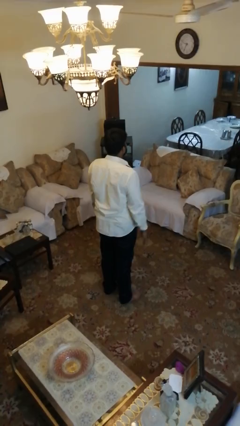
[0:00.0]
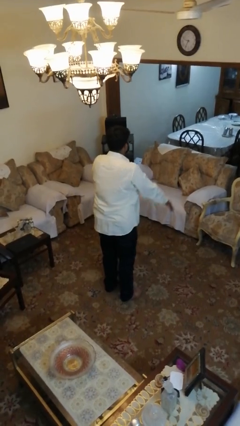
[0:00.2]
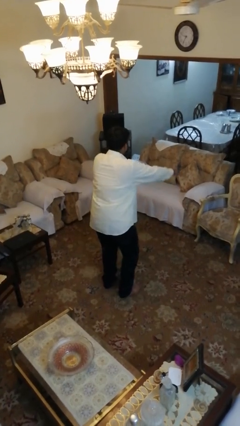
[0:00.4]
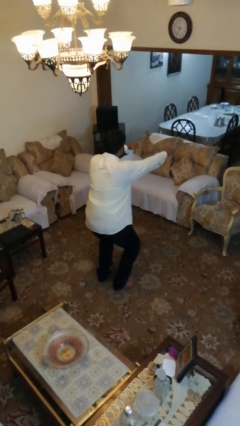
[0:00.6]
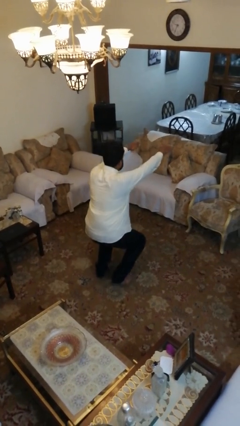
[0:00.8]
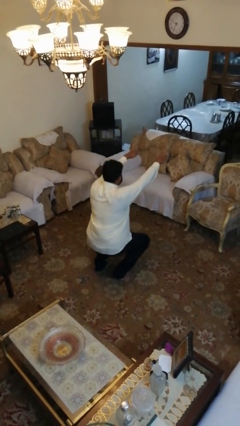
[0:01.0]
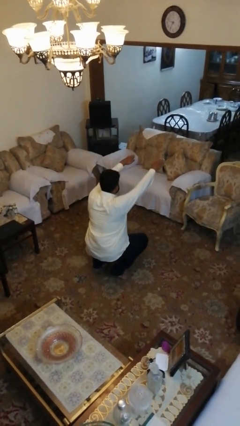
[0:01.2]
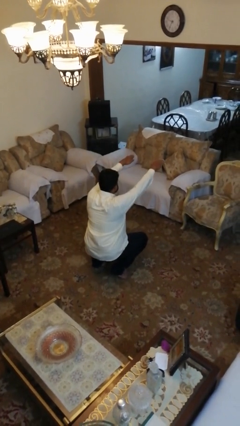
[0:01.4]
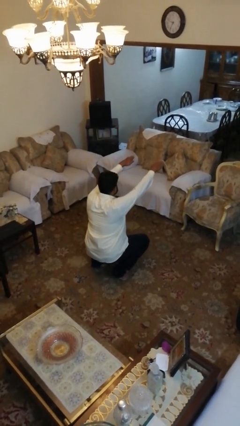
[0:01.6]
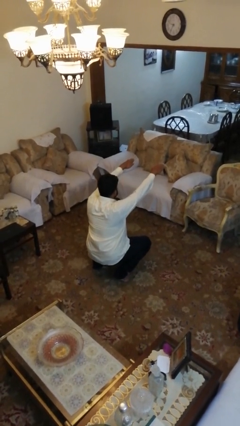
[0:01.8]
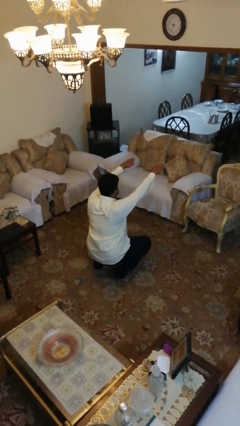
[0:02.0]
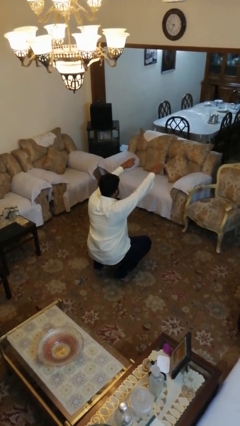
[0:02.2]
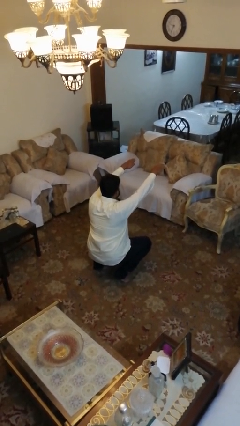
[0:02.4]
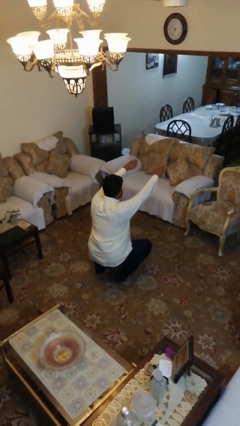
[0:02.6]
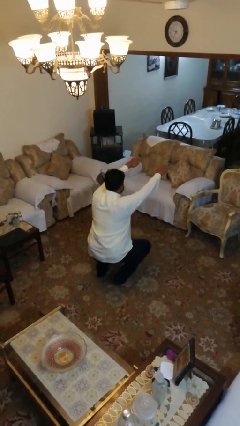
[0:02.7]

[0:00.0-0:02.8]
person squats

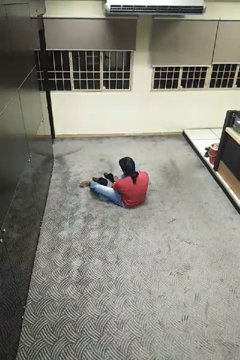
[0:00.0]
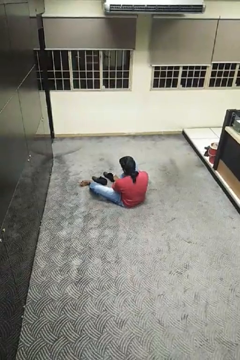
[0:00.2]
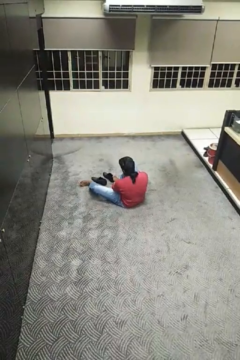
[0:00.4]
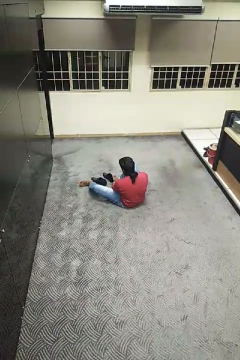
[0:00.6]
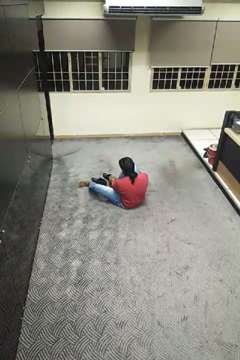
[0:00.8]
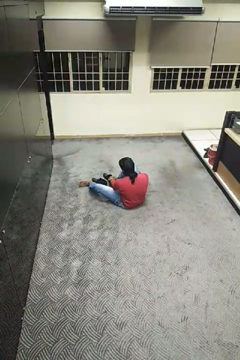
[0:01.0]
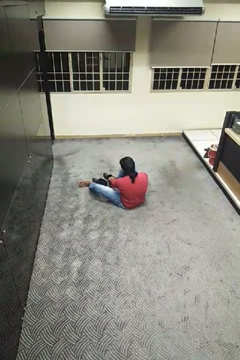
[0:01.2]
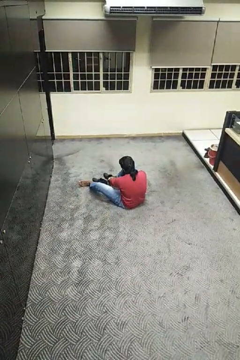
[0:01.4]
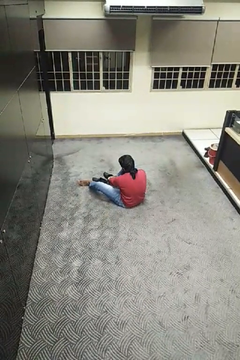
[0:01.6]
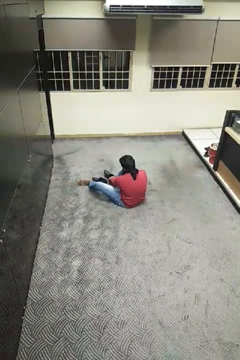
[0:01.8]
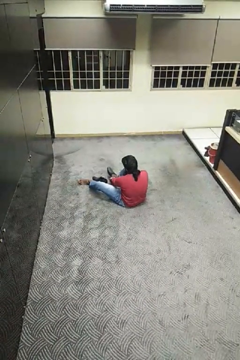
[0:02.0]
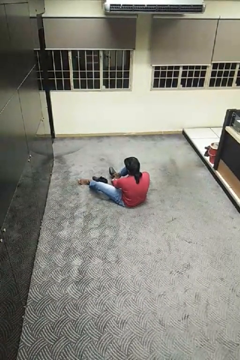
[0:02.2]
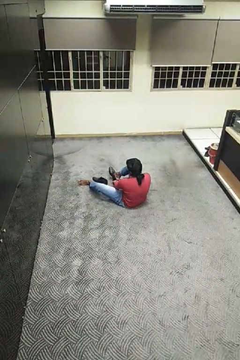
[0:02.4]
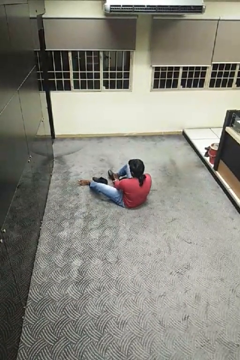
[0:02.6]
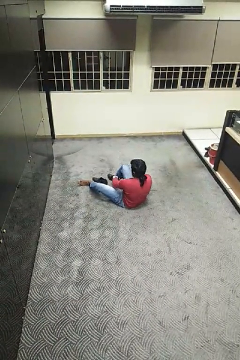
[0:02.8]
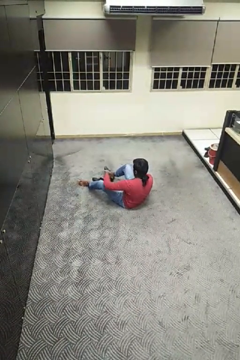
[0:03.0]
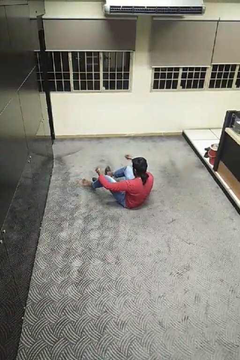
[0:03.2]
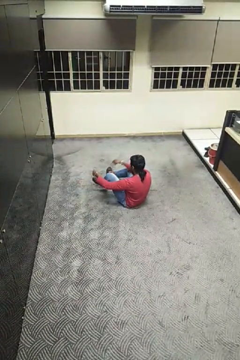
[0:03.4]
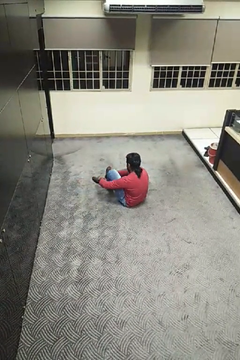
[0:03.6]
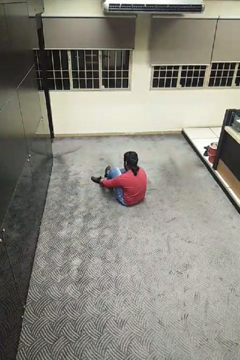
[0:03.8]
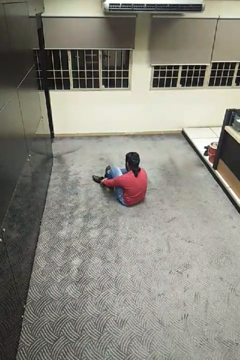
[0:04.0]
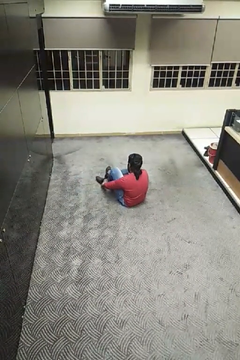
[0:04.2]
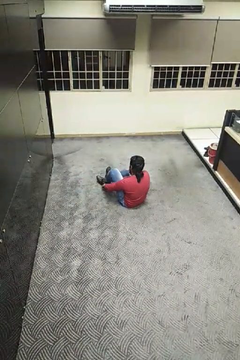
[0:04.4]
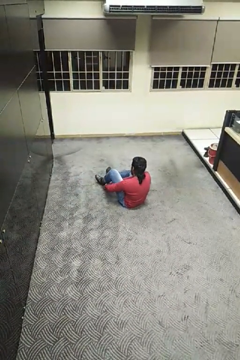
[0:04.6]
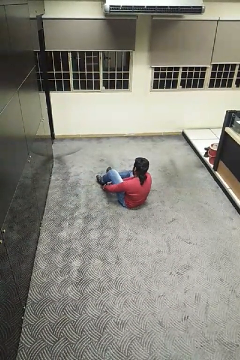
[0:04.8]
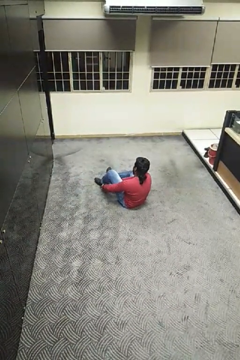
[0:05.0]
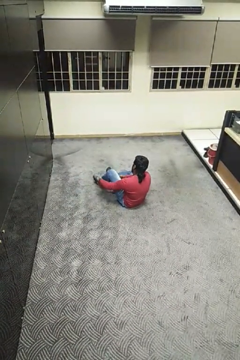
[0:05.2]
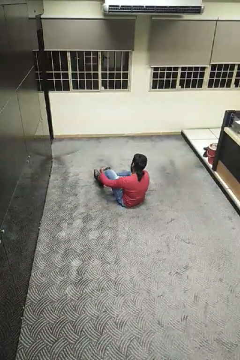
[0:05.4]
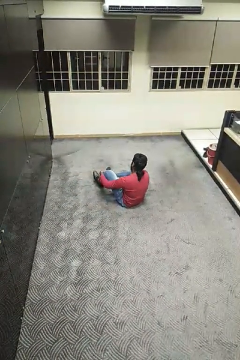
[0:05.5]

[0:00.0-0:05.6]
person puts on shoes

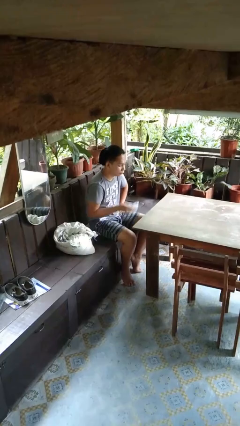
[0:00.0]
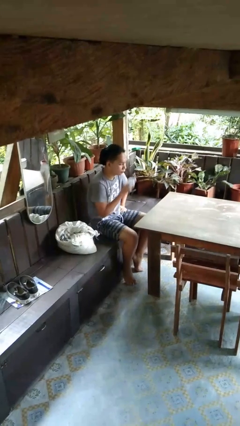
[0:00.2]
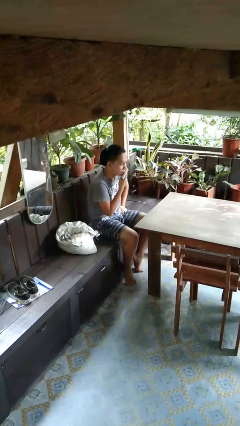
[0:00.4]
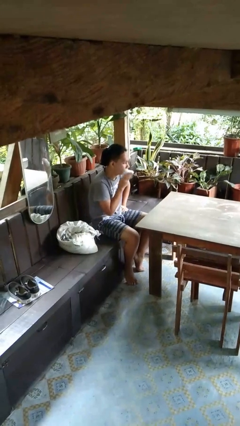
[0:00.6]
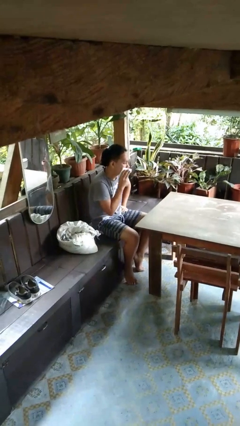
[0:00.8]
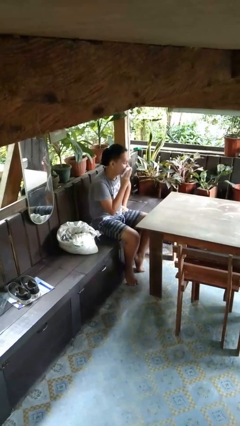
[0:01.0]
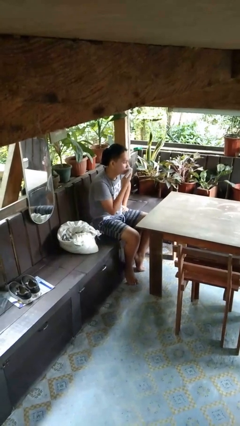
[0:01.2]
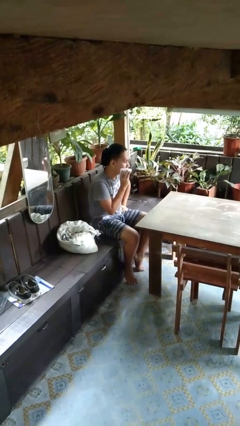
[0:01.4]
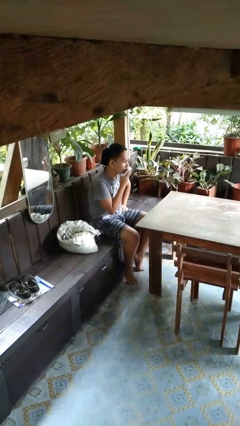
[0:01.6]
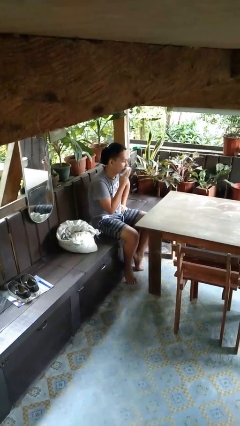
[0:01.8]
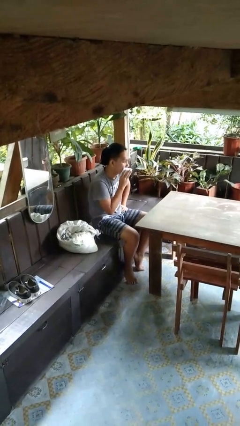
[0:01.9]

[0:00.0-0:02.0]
person wipes mouth with napkin

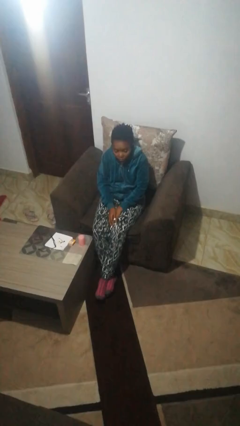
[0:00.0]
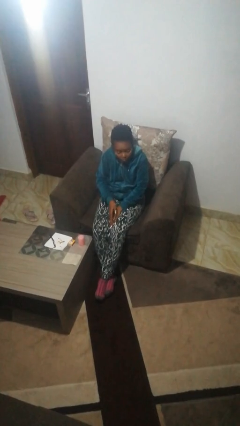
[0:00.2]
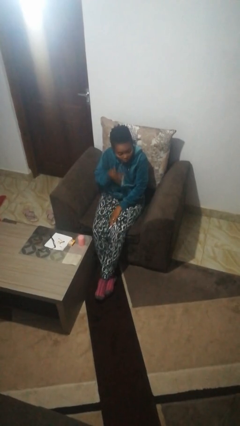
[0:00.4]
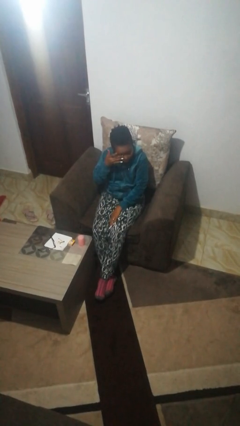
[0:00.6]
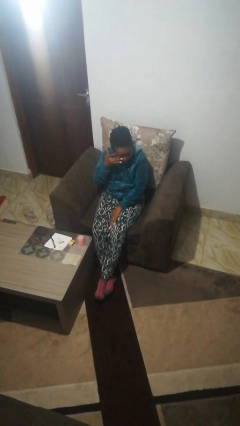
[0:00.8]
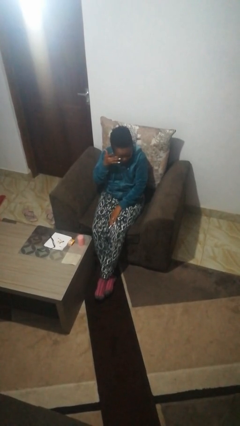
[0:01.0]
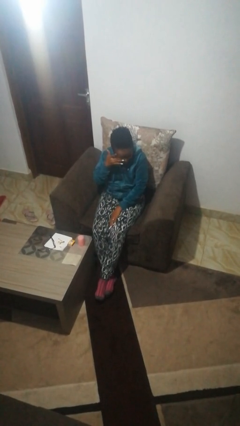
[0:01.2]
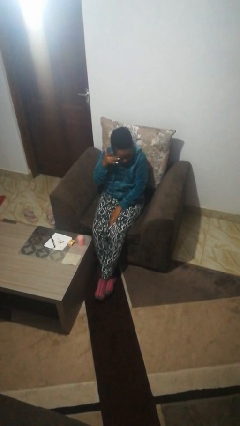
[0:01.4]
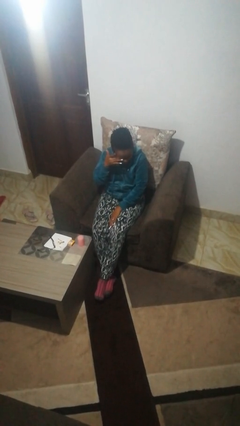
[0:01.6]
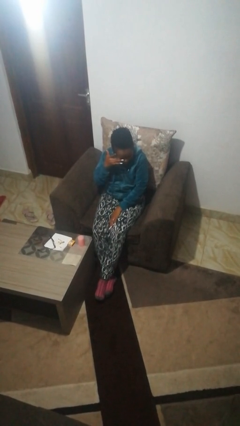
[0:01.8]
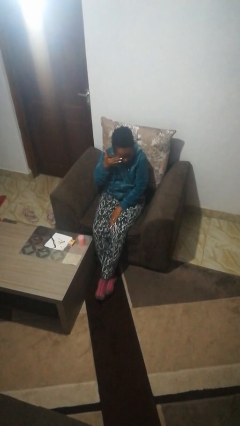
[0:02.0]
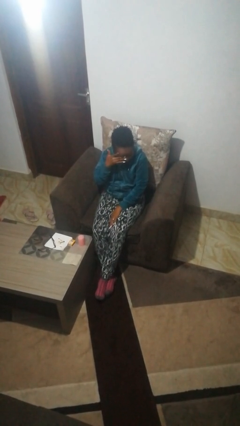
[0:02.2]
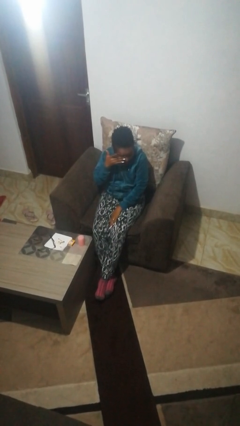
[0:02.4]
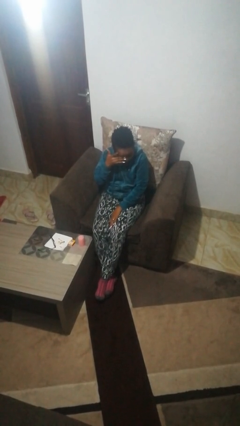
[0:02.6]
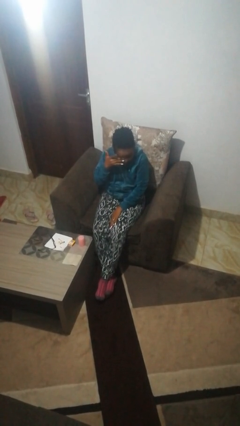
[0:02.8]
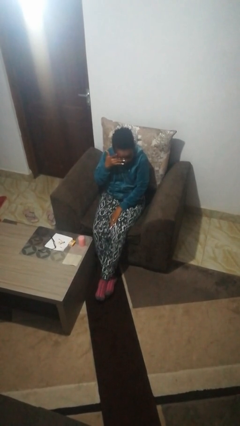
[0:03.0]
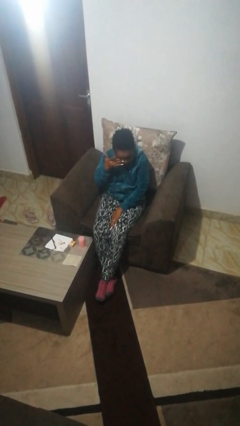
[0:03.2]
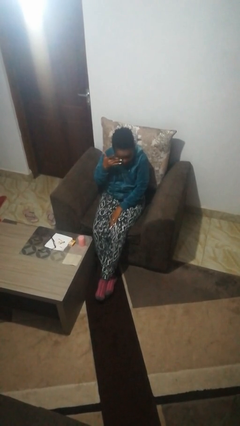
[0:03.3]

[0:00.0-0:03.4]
person rubs eyes

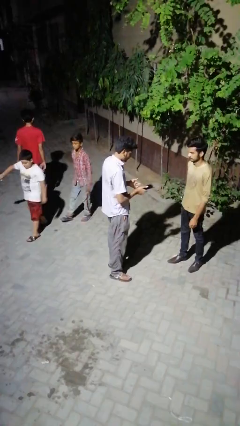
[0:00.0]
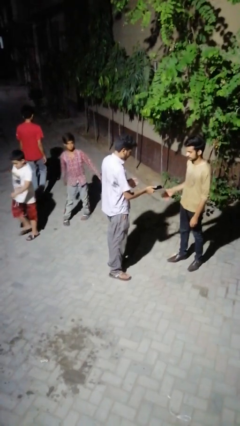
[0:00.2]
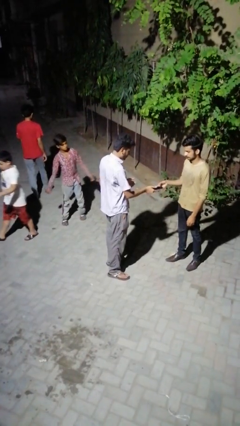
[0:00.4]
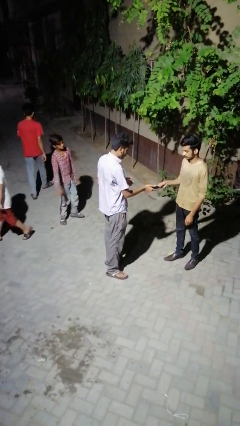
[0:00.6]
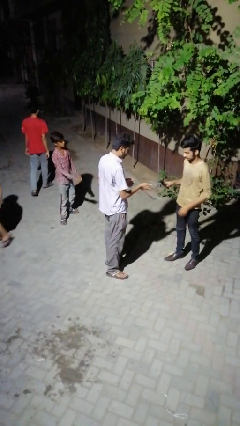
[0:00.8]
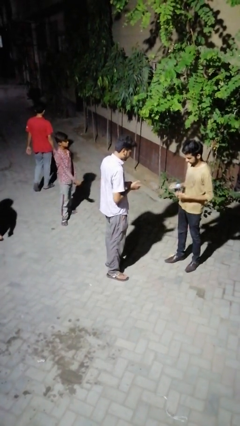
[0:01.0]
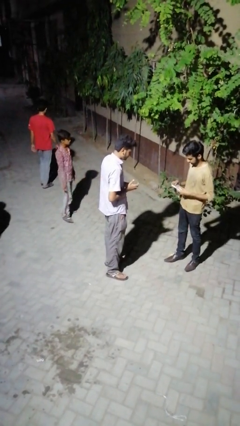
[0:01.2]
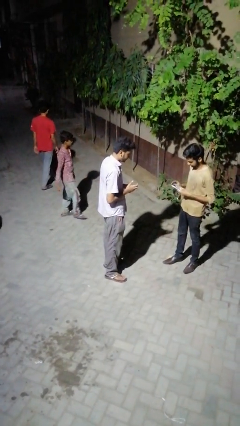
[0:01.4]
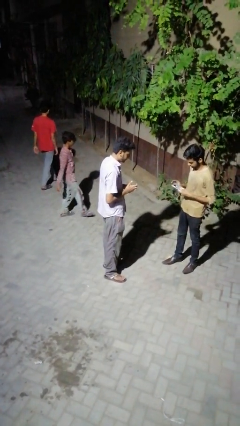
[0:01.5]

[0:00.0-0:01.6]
person transfers object to person

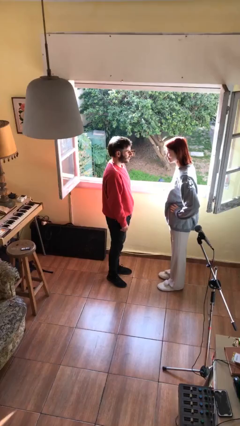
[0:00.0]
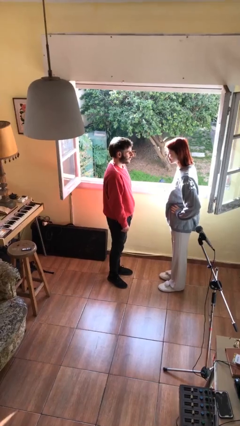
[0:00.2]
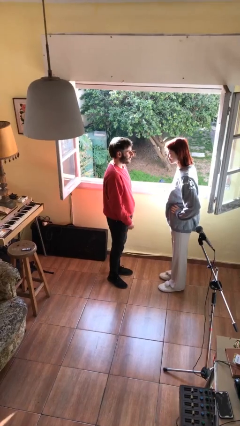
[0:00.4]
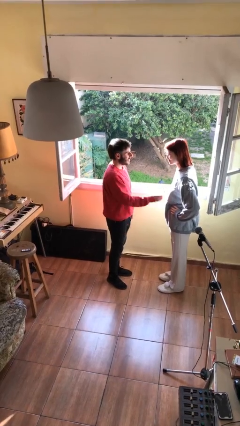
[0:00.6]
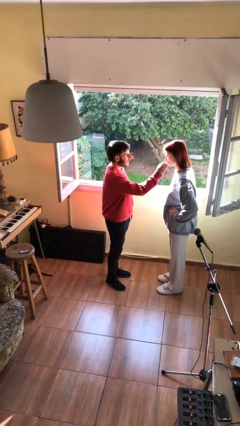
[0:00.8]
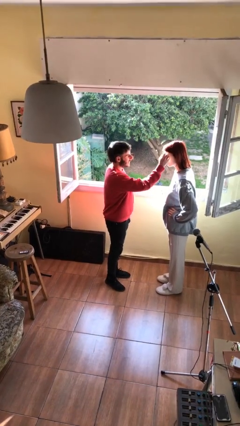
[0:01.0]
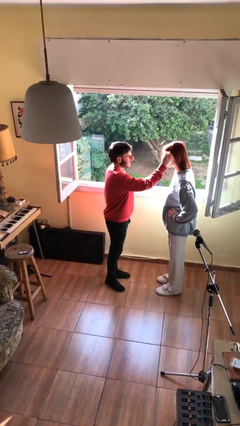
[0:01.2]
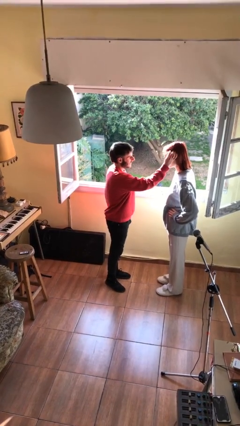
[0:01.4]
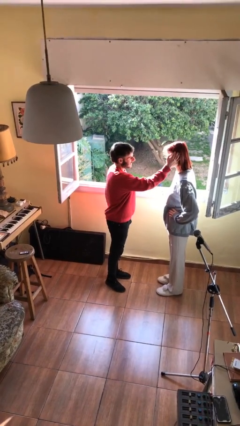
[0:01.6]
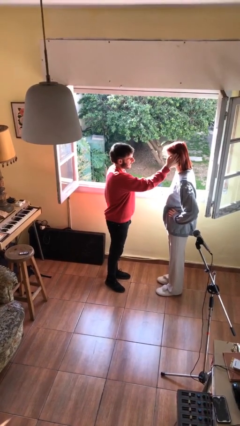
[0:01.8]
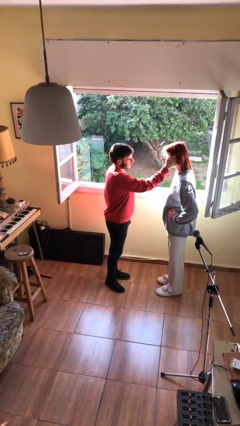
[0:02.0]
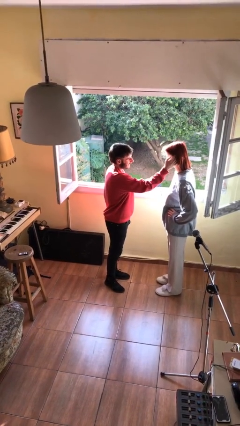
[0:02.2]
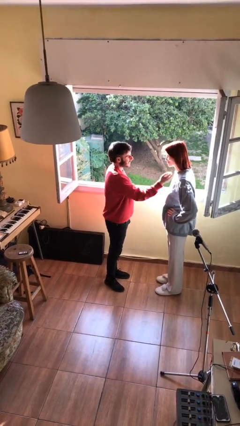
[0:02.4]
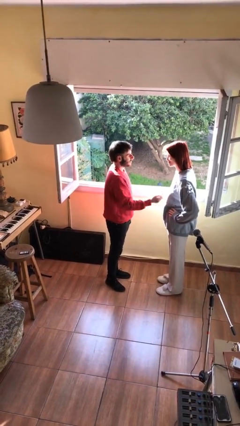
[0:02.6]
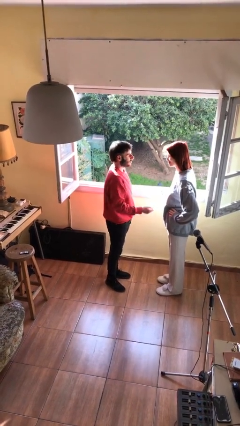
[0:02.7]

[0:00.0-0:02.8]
person touches face of person
